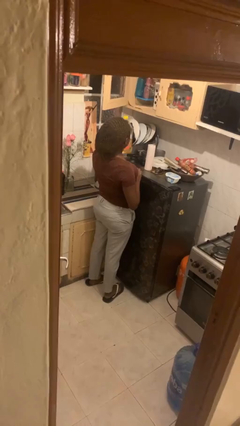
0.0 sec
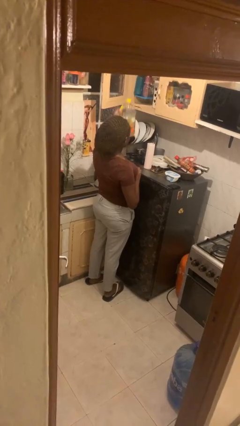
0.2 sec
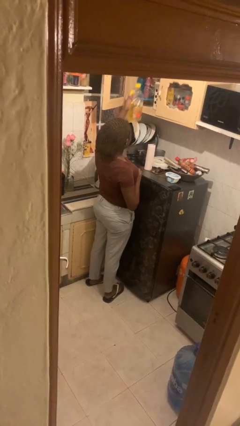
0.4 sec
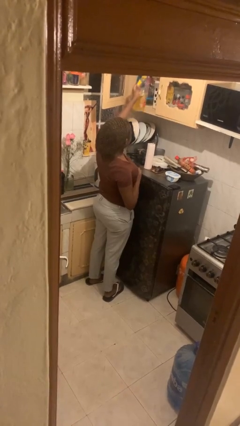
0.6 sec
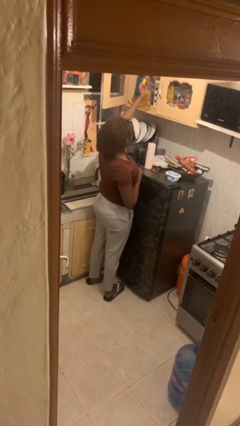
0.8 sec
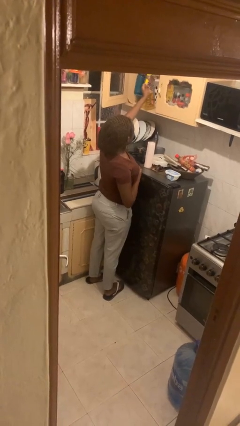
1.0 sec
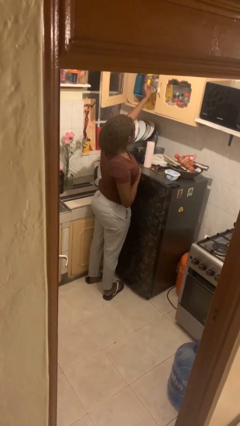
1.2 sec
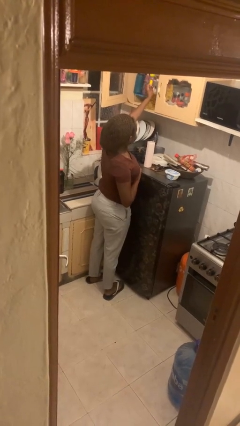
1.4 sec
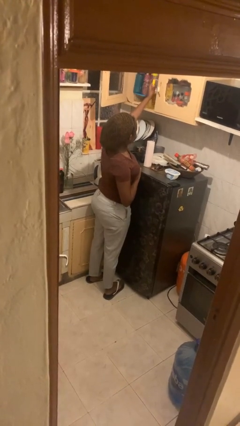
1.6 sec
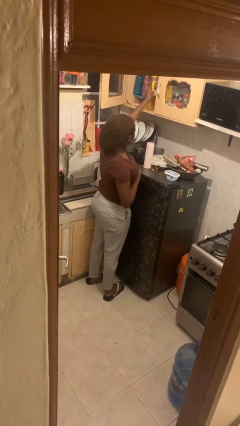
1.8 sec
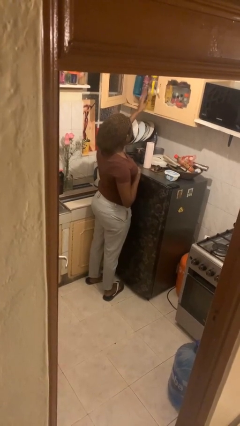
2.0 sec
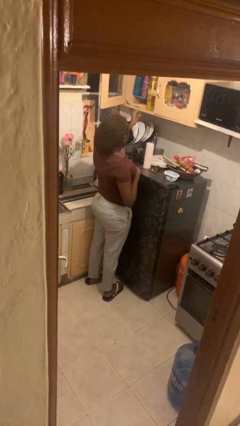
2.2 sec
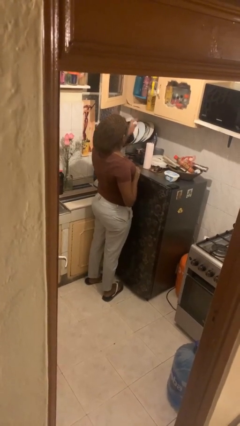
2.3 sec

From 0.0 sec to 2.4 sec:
person puts down object into cabinet

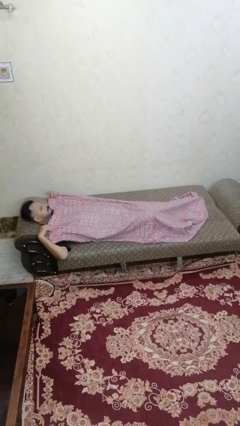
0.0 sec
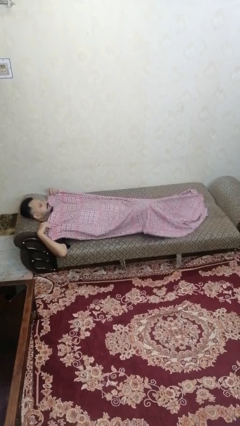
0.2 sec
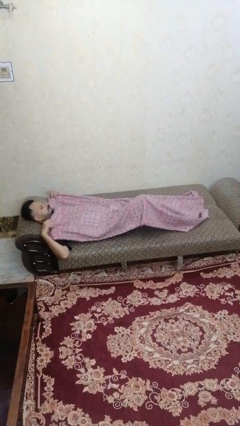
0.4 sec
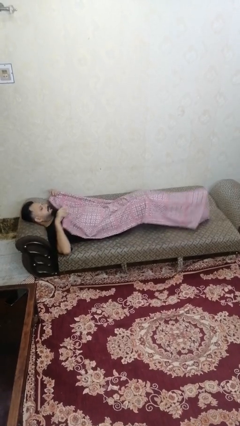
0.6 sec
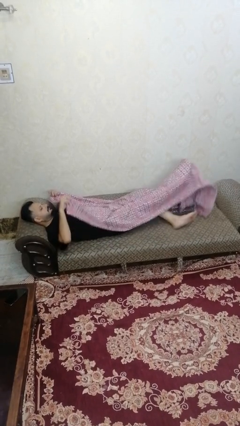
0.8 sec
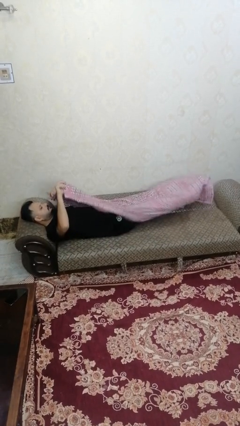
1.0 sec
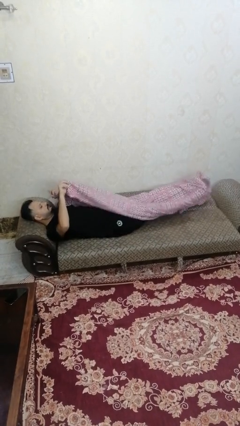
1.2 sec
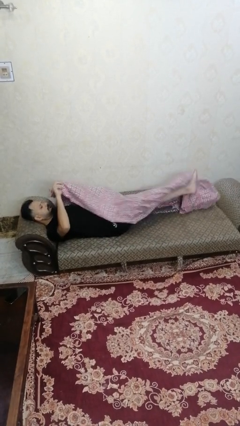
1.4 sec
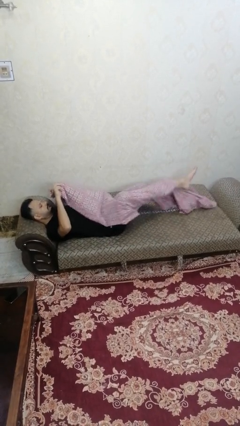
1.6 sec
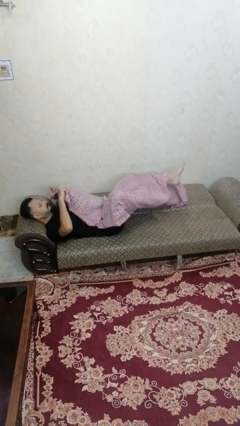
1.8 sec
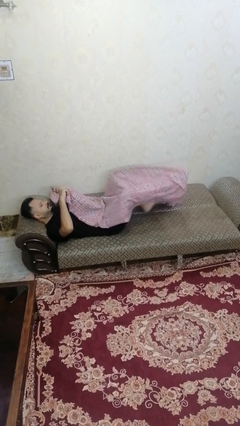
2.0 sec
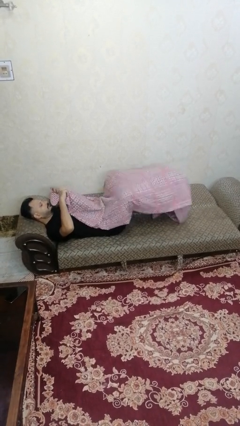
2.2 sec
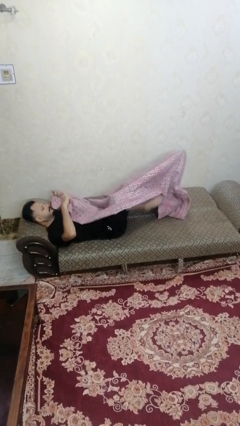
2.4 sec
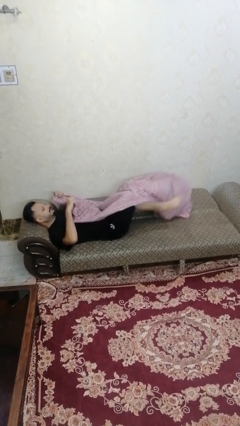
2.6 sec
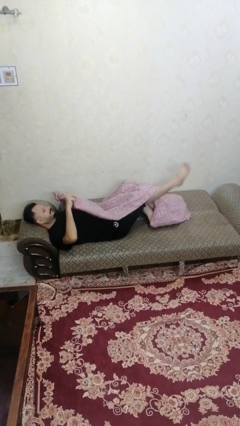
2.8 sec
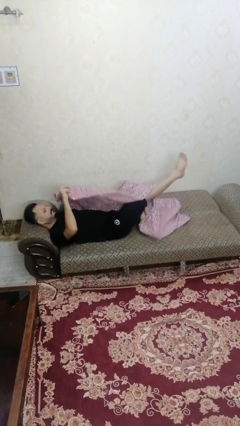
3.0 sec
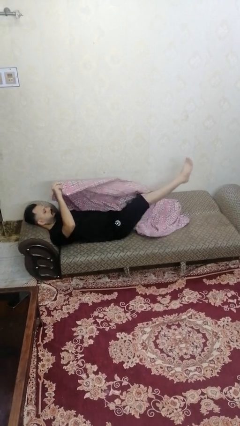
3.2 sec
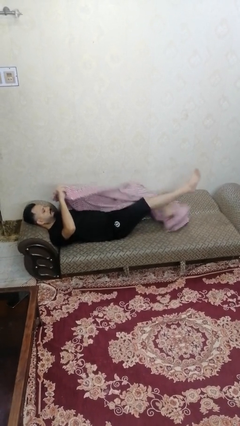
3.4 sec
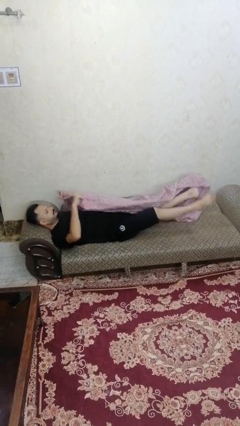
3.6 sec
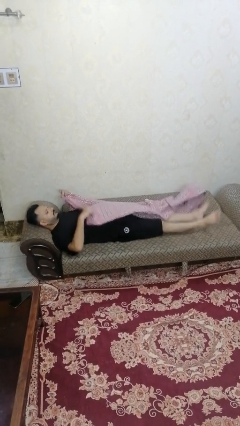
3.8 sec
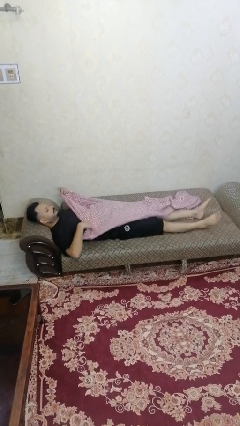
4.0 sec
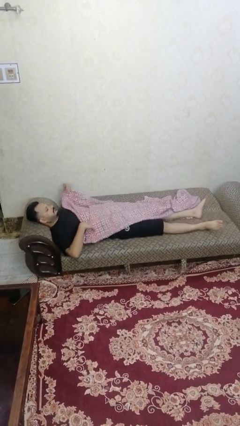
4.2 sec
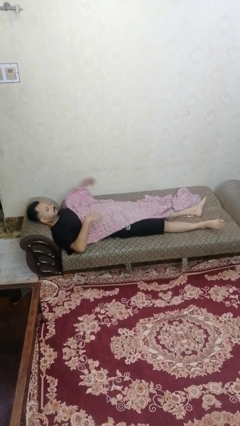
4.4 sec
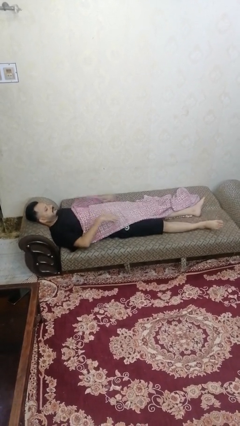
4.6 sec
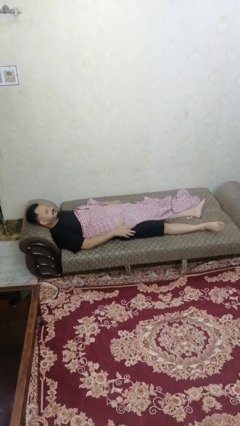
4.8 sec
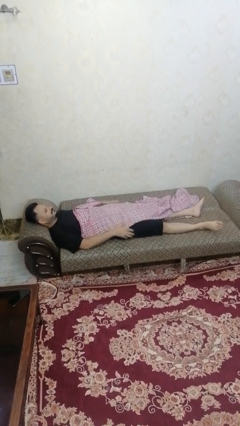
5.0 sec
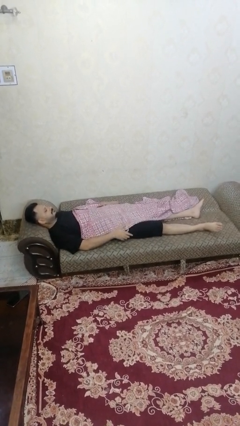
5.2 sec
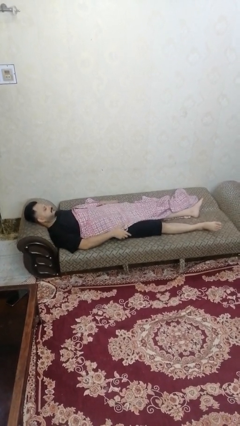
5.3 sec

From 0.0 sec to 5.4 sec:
person uncovers with bedsheets

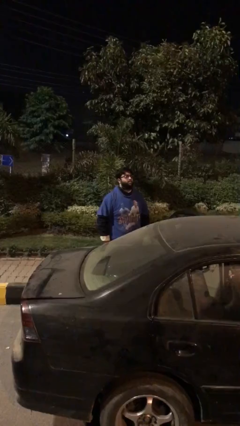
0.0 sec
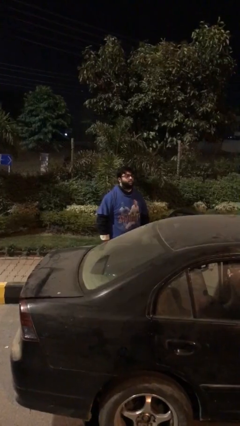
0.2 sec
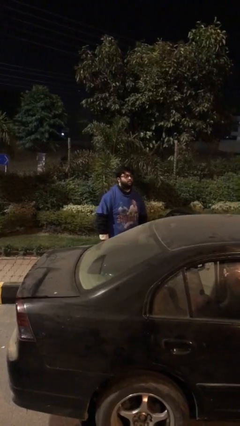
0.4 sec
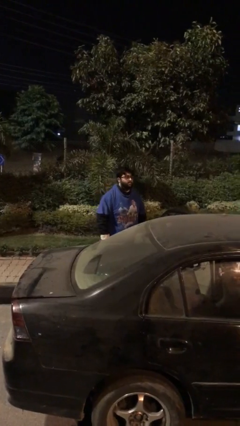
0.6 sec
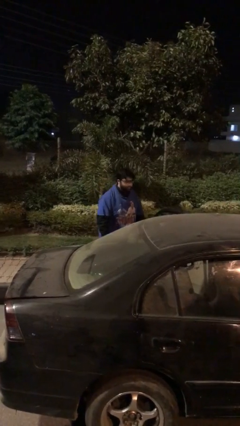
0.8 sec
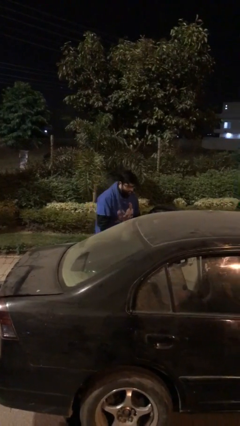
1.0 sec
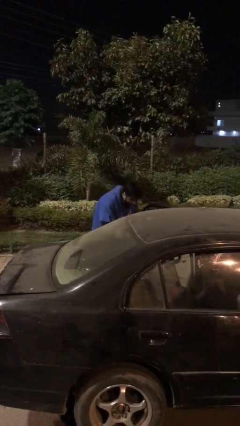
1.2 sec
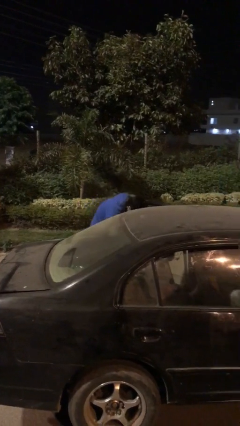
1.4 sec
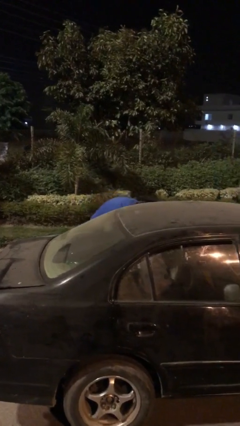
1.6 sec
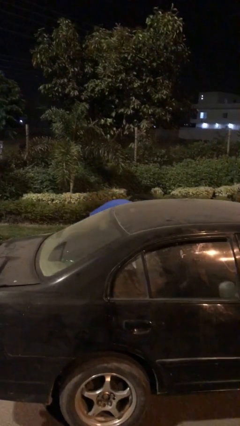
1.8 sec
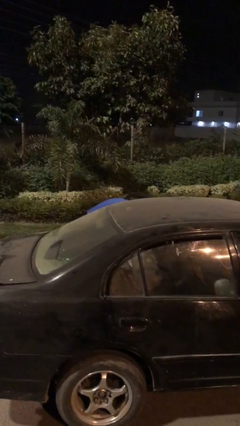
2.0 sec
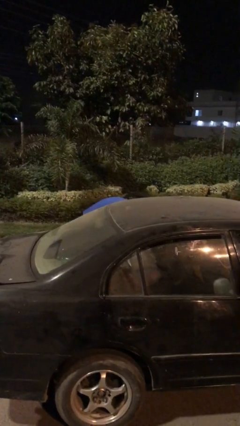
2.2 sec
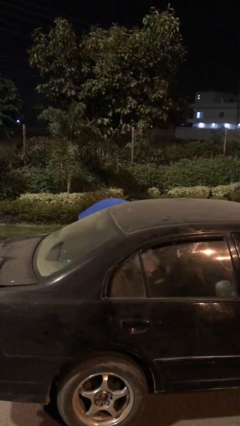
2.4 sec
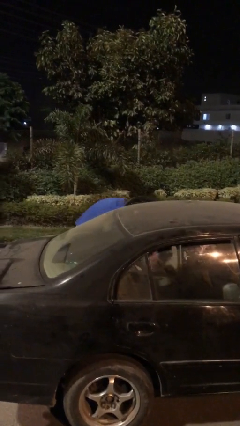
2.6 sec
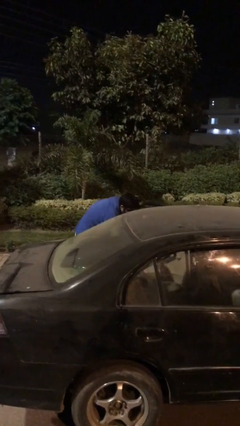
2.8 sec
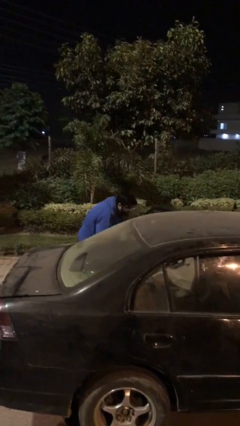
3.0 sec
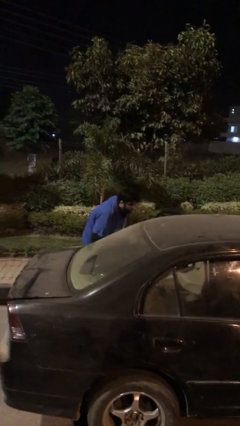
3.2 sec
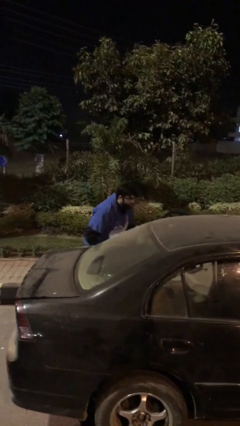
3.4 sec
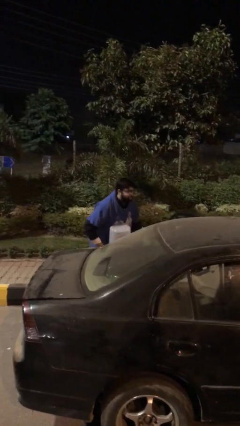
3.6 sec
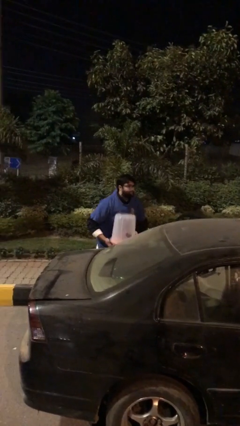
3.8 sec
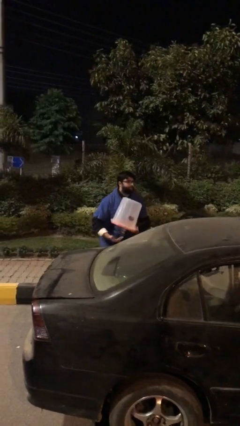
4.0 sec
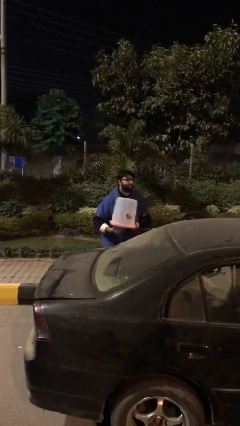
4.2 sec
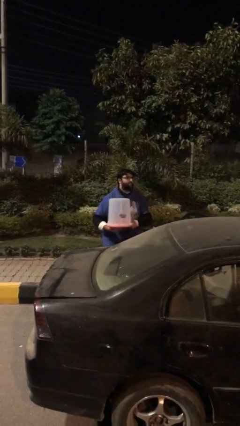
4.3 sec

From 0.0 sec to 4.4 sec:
person unloads car

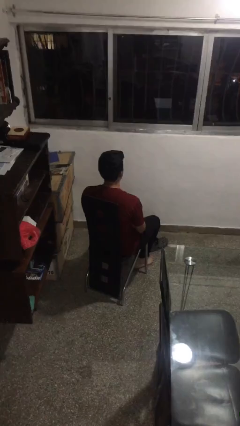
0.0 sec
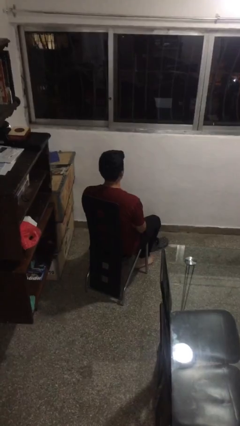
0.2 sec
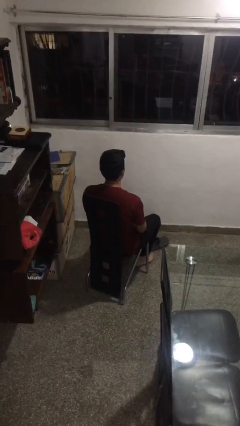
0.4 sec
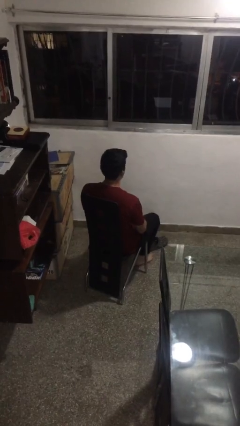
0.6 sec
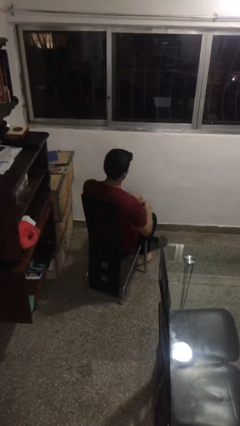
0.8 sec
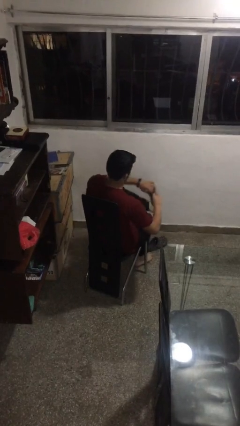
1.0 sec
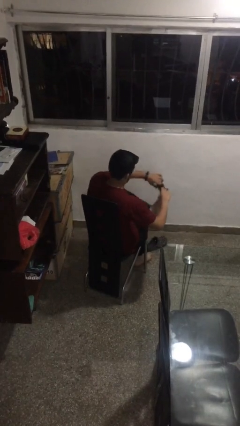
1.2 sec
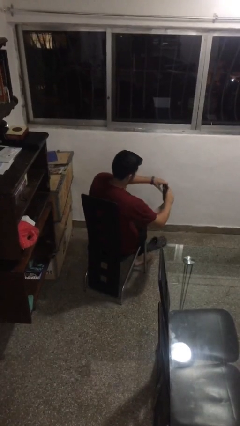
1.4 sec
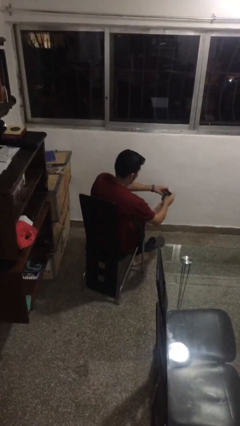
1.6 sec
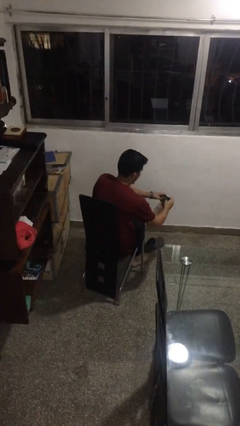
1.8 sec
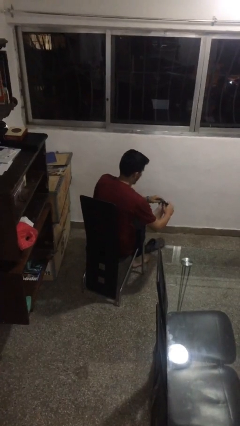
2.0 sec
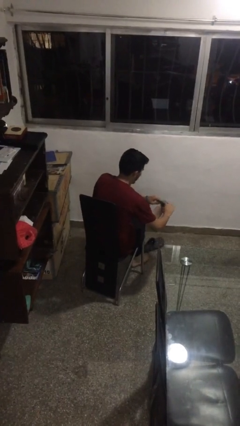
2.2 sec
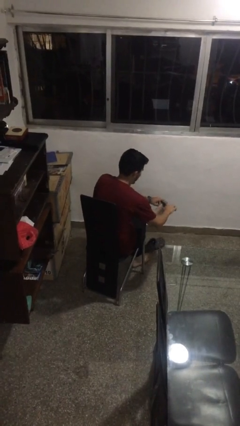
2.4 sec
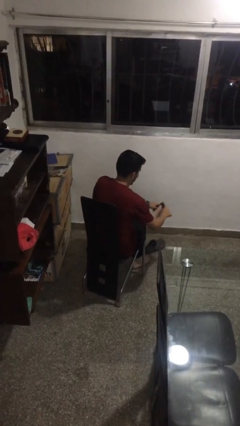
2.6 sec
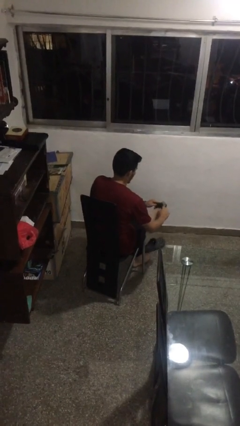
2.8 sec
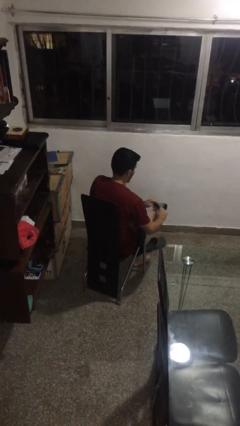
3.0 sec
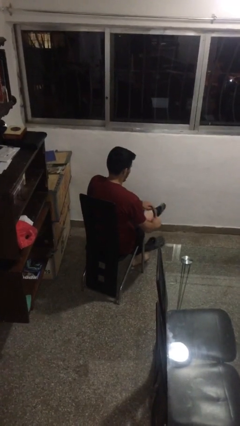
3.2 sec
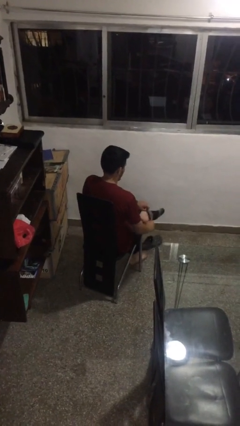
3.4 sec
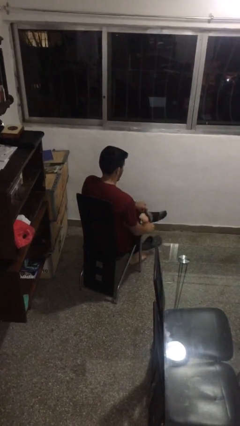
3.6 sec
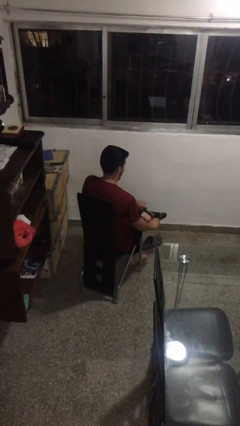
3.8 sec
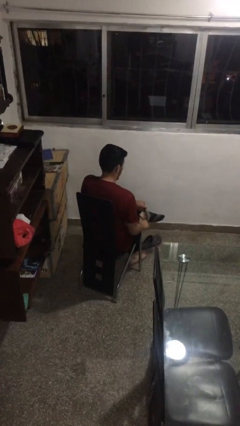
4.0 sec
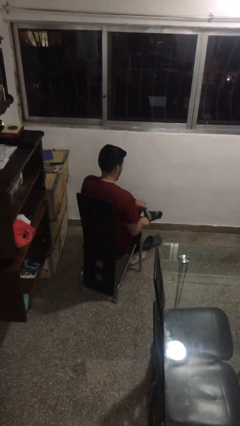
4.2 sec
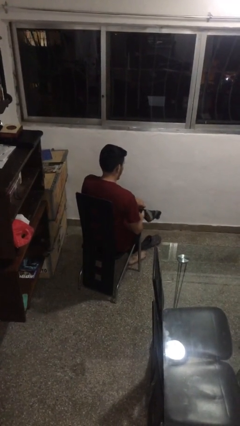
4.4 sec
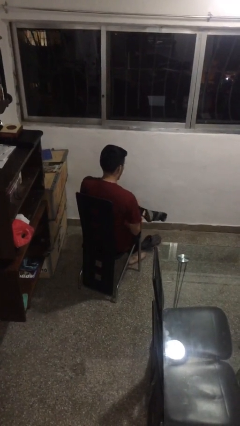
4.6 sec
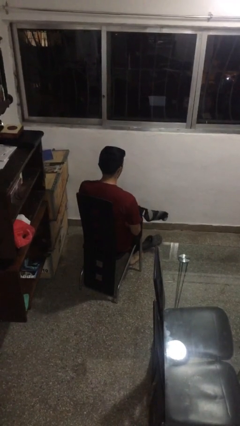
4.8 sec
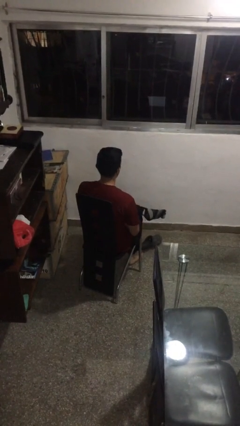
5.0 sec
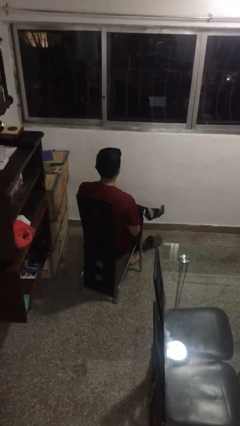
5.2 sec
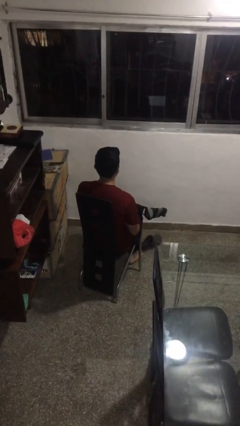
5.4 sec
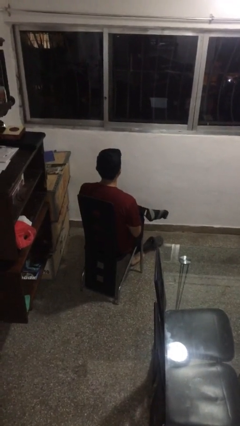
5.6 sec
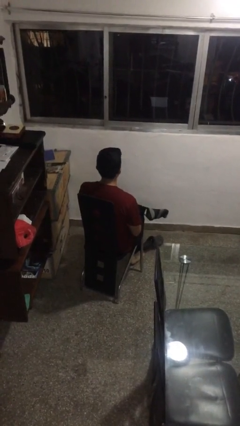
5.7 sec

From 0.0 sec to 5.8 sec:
person puts on socks
